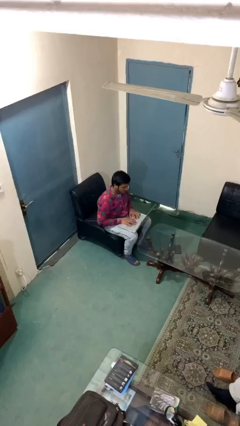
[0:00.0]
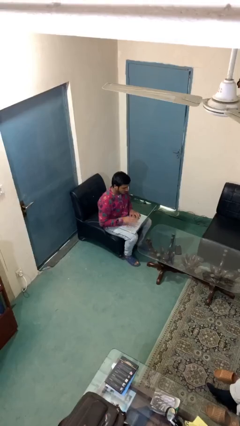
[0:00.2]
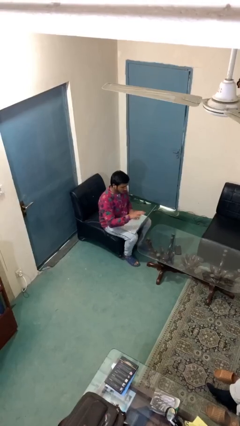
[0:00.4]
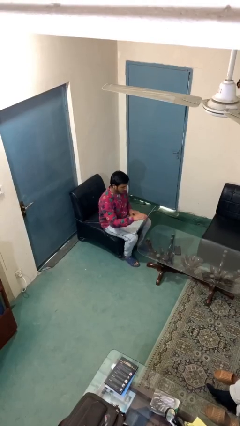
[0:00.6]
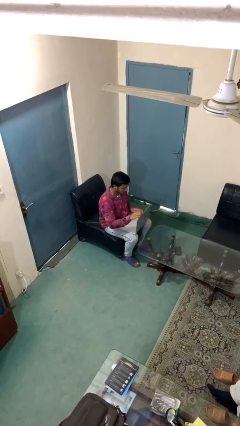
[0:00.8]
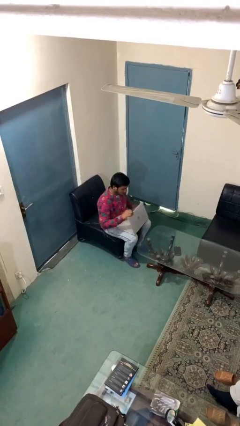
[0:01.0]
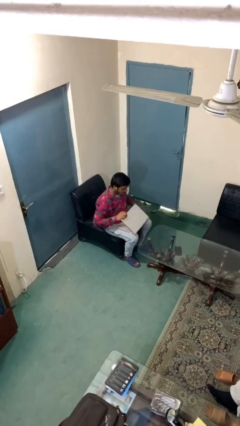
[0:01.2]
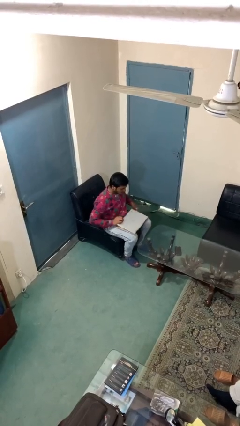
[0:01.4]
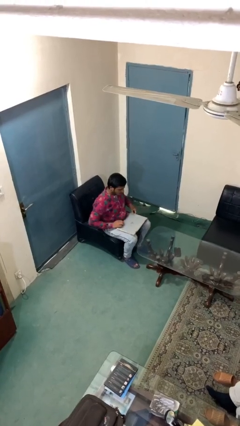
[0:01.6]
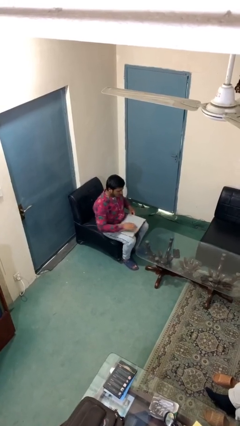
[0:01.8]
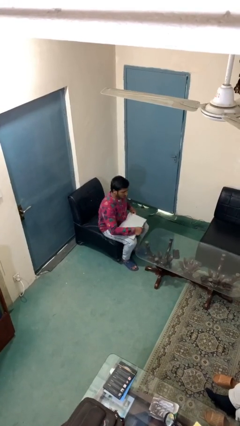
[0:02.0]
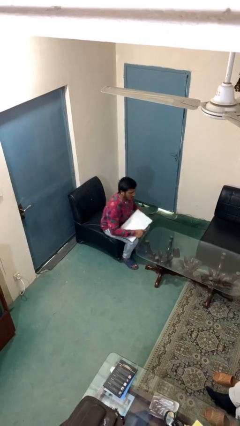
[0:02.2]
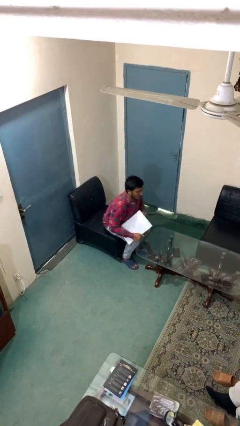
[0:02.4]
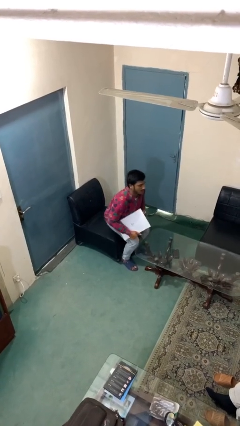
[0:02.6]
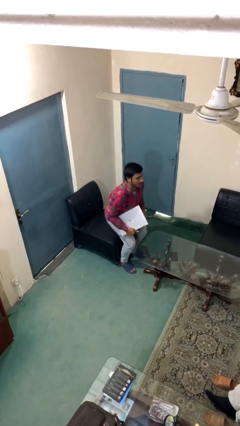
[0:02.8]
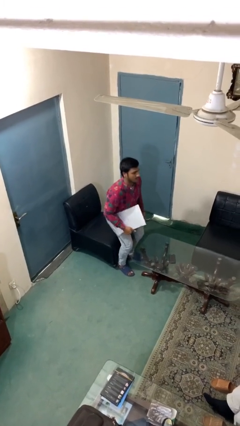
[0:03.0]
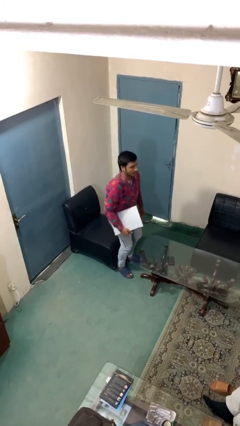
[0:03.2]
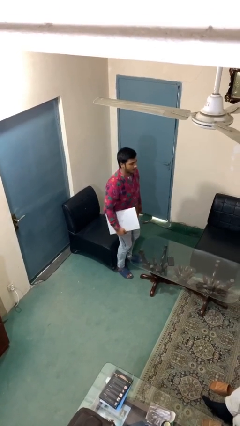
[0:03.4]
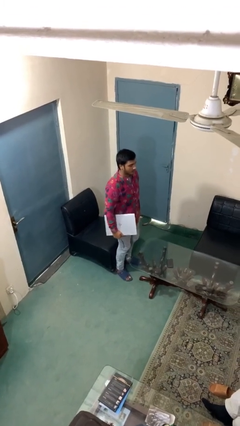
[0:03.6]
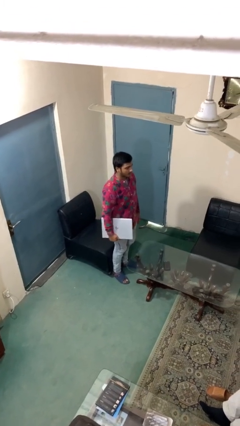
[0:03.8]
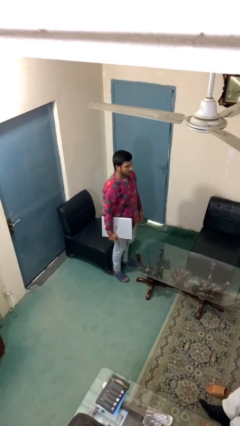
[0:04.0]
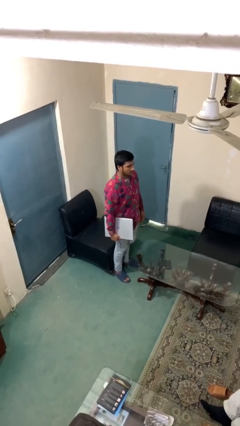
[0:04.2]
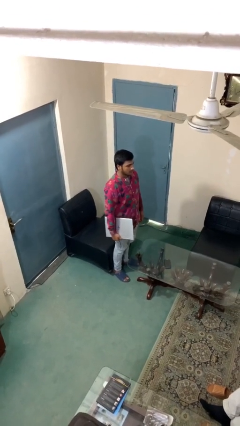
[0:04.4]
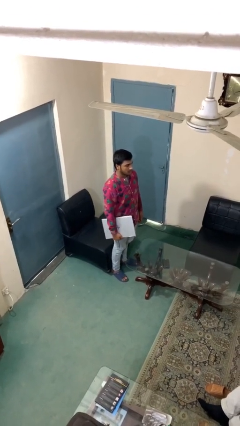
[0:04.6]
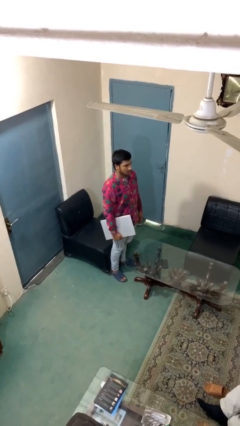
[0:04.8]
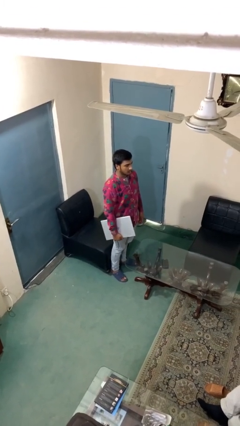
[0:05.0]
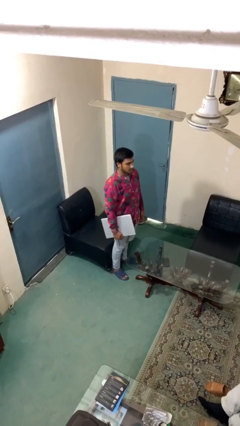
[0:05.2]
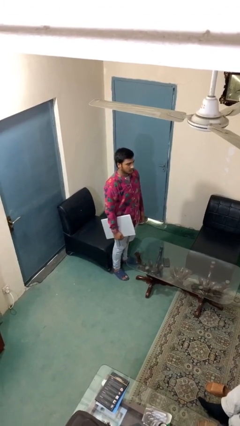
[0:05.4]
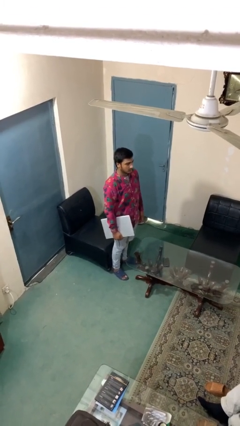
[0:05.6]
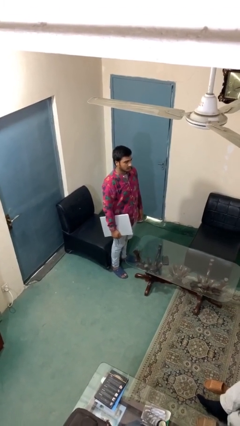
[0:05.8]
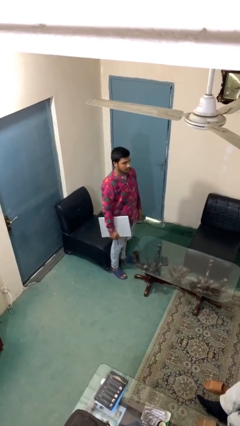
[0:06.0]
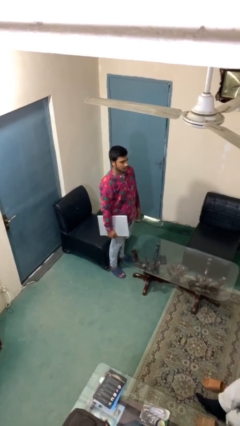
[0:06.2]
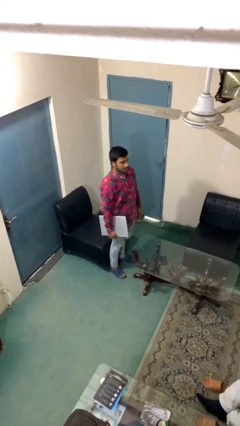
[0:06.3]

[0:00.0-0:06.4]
person stands up

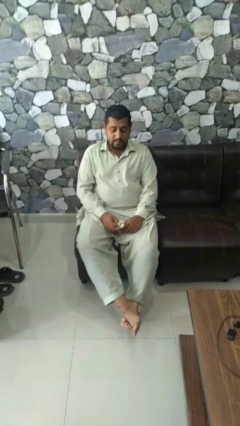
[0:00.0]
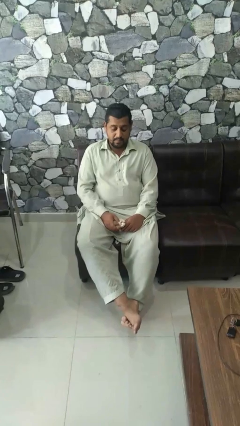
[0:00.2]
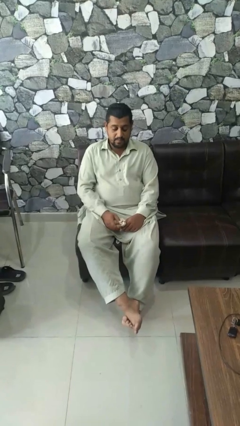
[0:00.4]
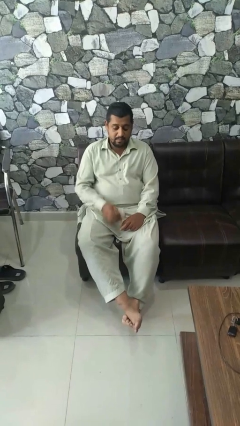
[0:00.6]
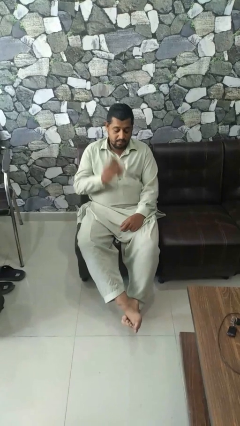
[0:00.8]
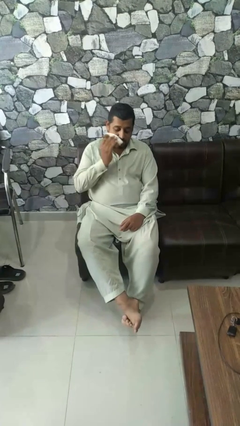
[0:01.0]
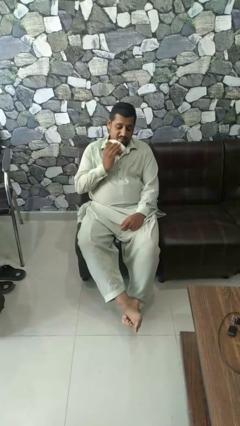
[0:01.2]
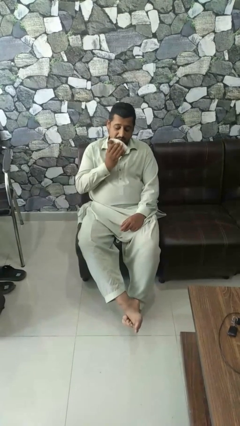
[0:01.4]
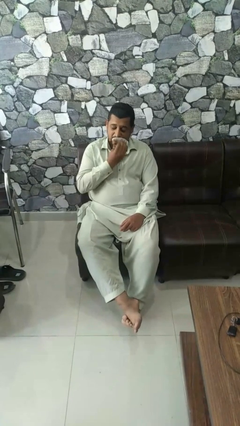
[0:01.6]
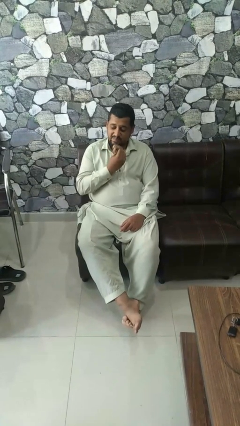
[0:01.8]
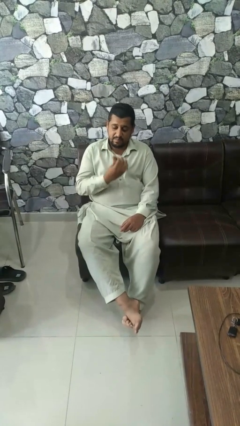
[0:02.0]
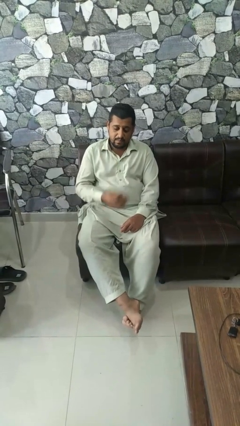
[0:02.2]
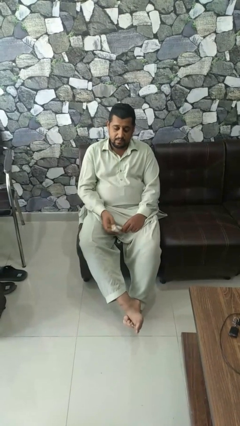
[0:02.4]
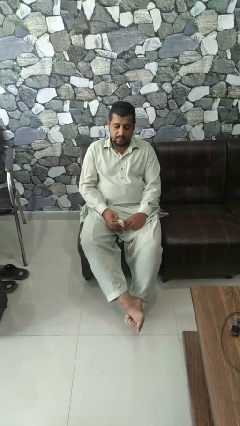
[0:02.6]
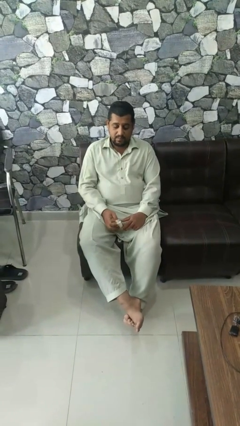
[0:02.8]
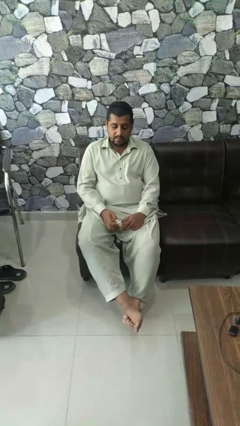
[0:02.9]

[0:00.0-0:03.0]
person wipes mouth with napkin

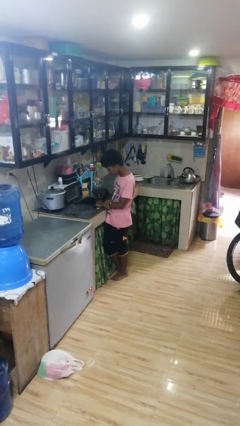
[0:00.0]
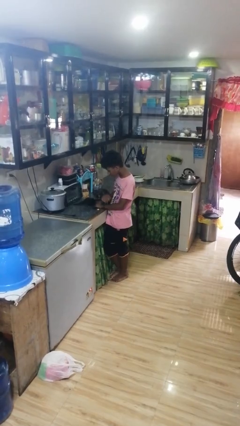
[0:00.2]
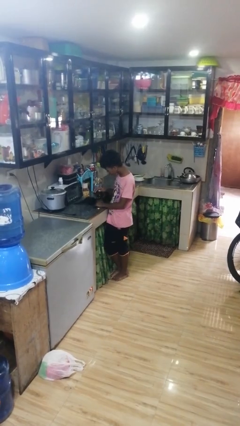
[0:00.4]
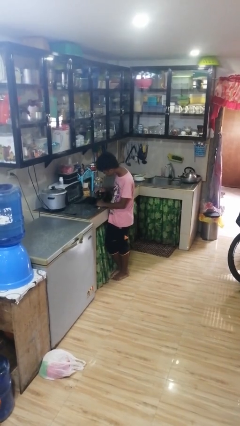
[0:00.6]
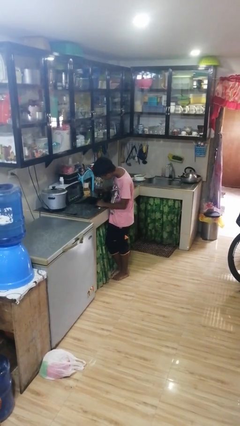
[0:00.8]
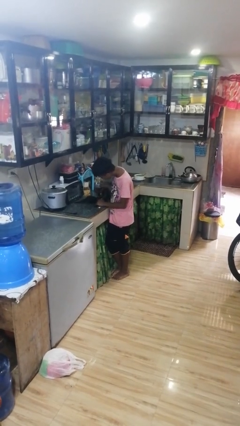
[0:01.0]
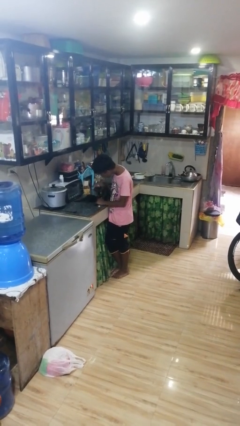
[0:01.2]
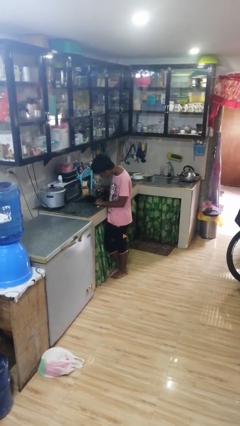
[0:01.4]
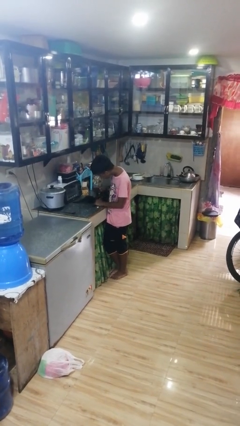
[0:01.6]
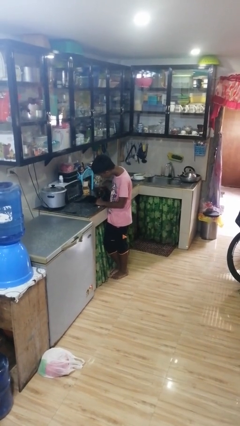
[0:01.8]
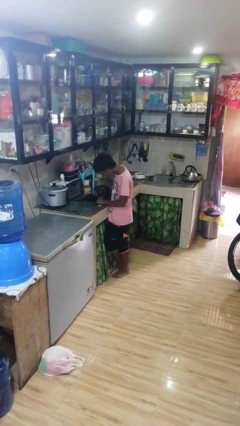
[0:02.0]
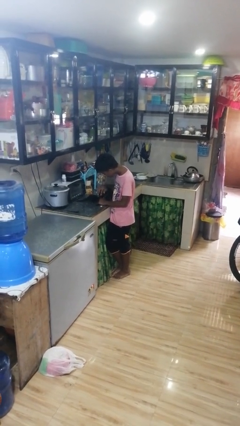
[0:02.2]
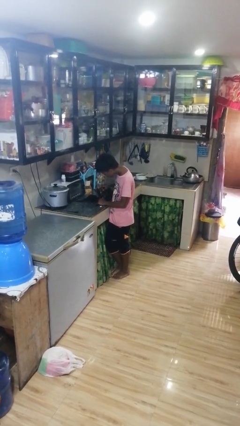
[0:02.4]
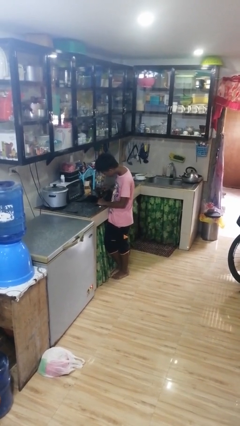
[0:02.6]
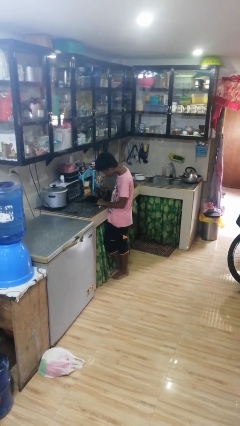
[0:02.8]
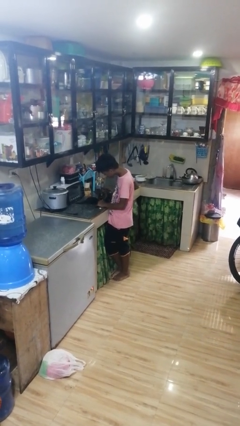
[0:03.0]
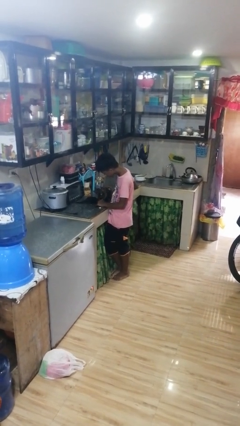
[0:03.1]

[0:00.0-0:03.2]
person pets cat

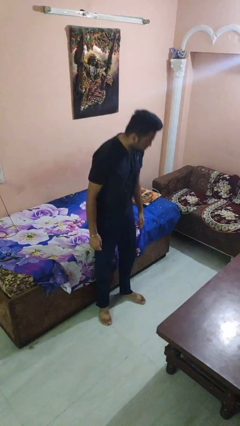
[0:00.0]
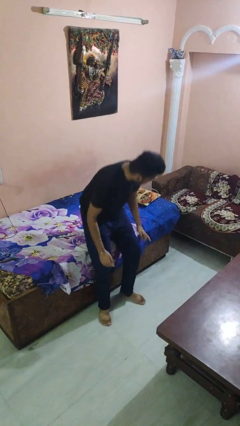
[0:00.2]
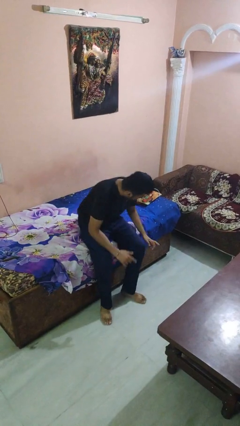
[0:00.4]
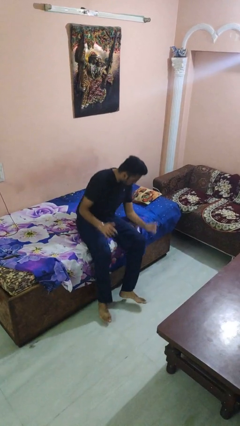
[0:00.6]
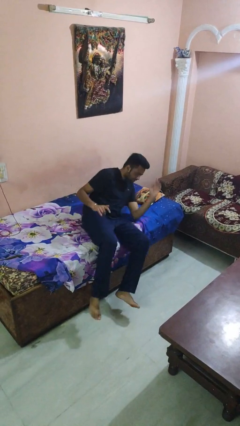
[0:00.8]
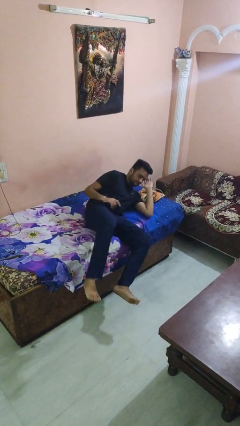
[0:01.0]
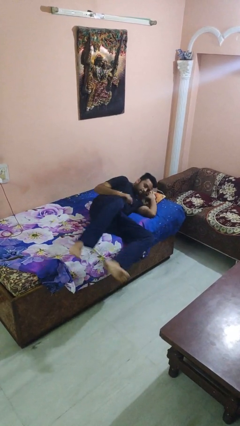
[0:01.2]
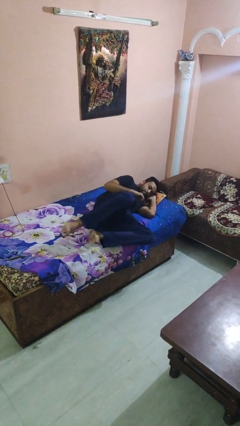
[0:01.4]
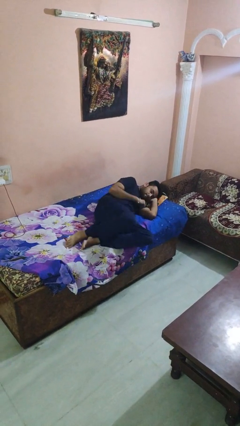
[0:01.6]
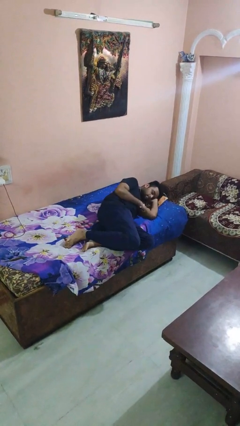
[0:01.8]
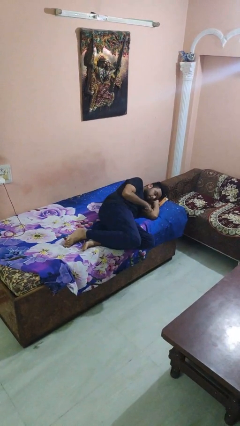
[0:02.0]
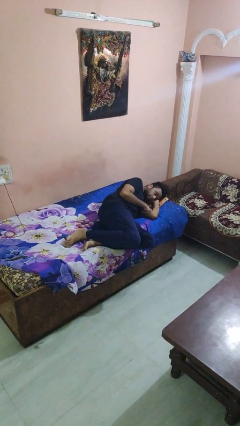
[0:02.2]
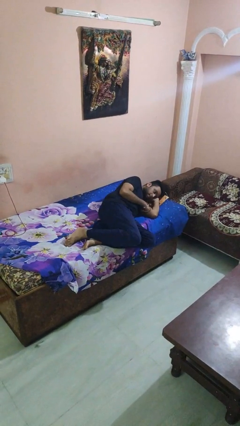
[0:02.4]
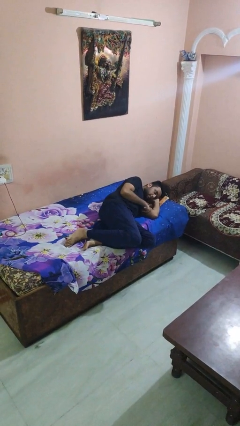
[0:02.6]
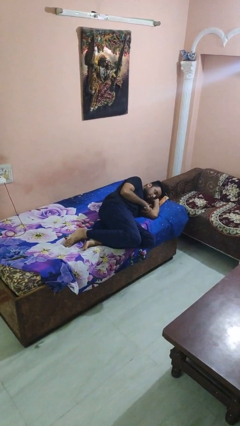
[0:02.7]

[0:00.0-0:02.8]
person lies down on bed

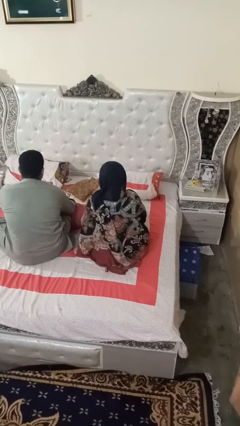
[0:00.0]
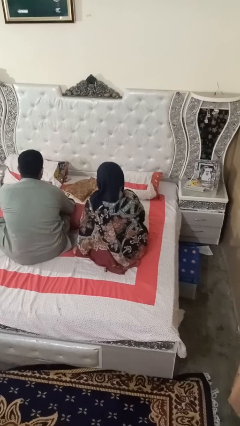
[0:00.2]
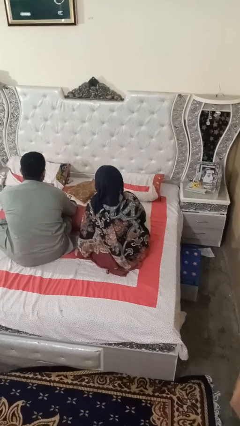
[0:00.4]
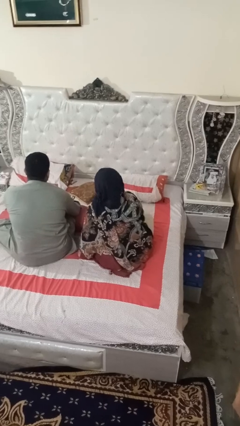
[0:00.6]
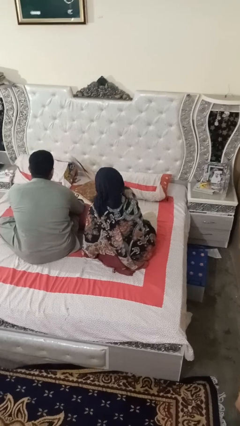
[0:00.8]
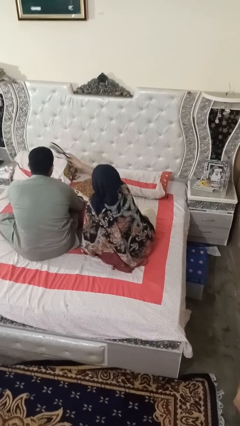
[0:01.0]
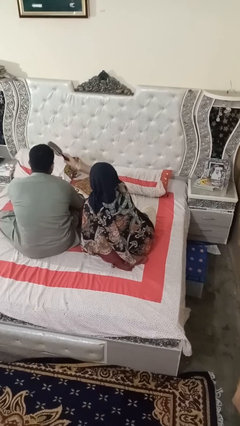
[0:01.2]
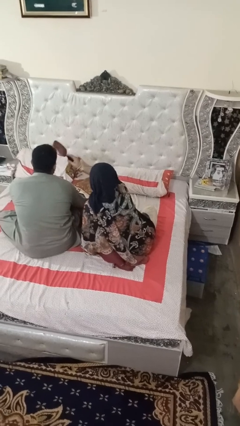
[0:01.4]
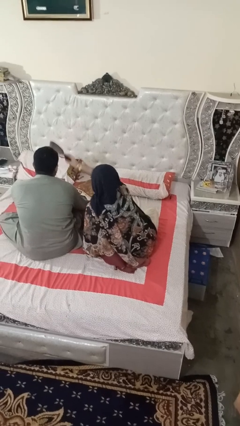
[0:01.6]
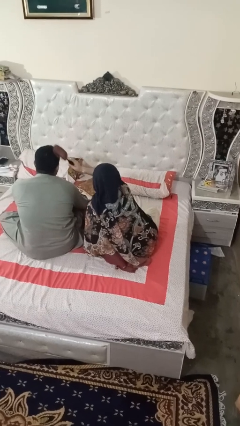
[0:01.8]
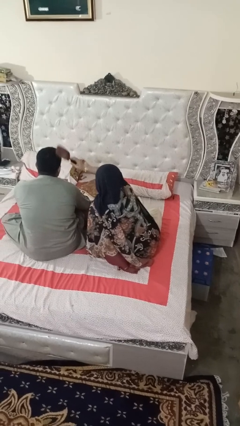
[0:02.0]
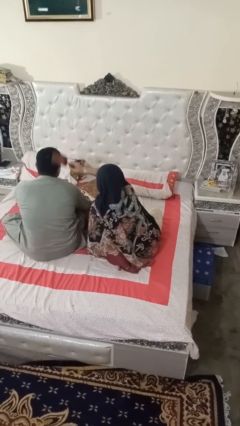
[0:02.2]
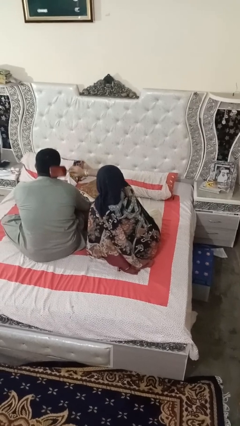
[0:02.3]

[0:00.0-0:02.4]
person brushes hair of person
